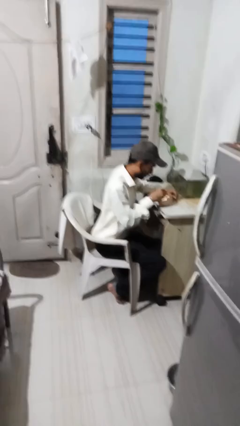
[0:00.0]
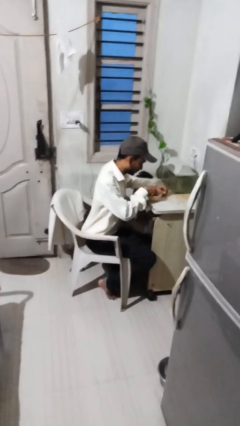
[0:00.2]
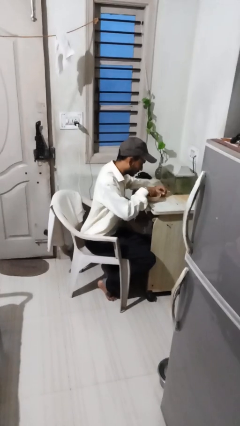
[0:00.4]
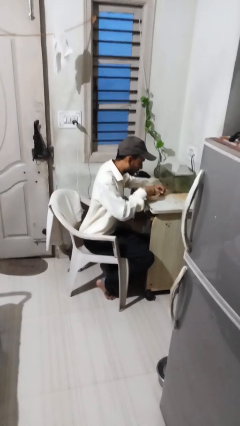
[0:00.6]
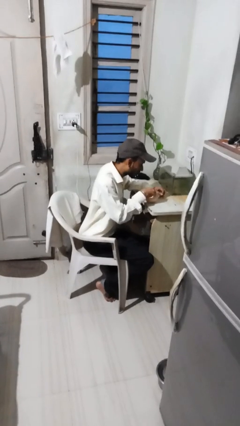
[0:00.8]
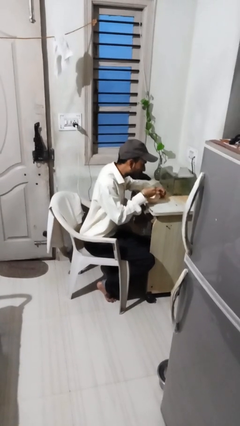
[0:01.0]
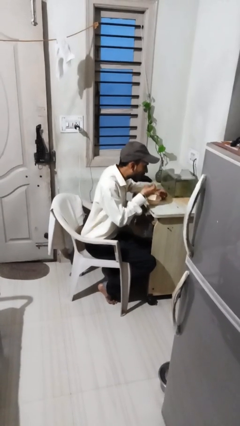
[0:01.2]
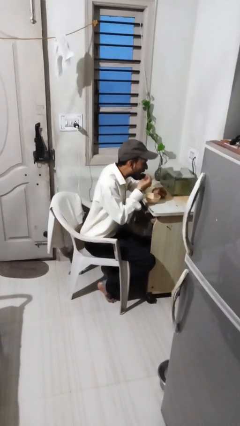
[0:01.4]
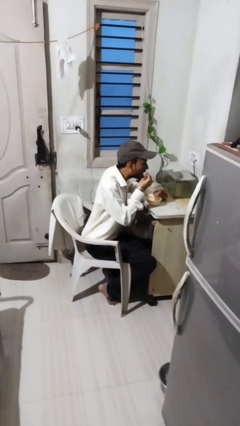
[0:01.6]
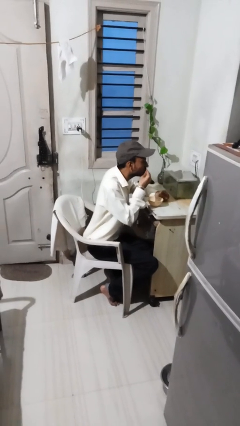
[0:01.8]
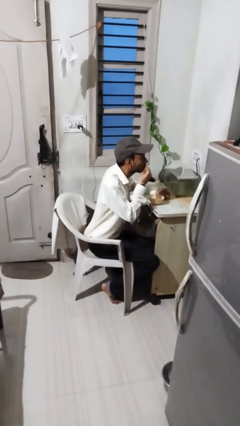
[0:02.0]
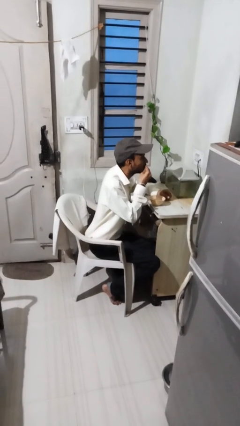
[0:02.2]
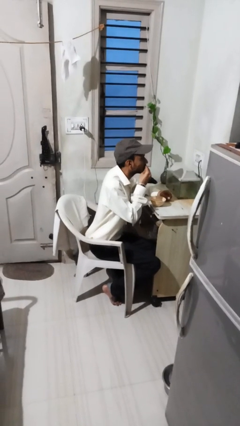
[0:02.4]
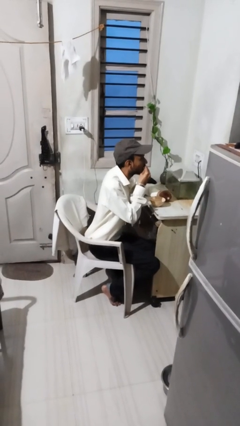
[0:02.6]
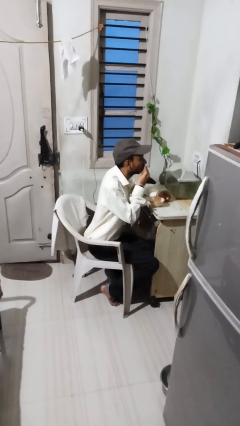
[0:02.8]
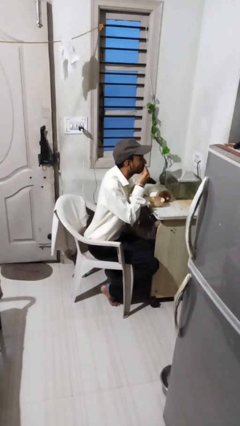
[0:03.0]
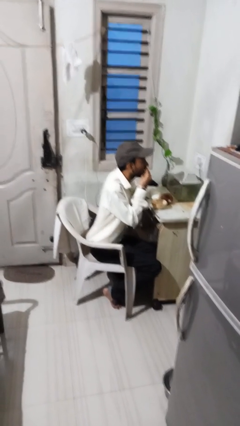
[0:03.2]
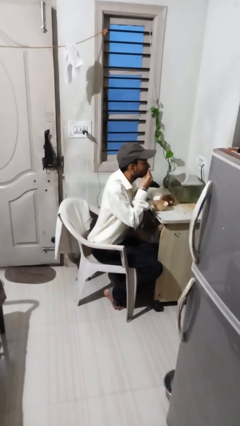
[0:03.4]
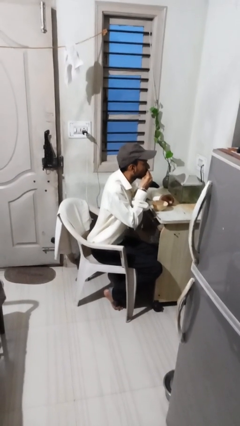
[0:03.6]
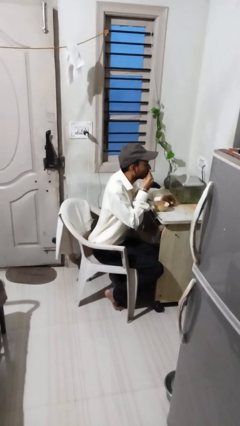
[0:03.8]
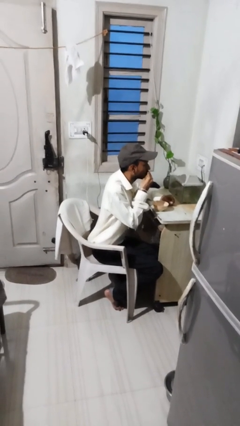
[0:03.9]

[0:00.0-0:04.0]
person eats with hands

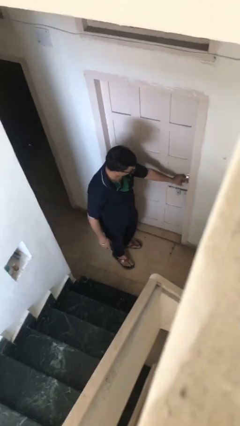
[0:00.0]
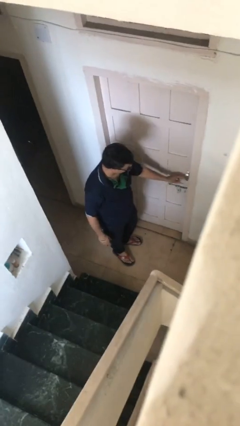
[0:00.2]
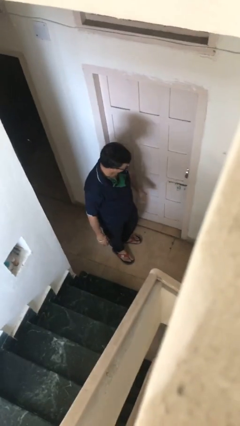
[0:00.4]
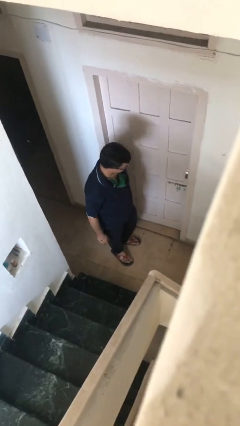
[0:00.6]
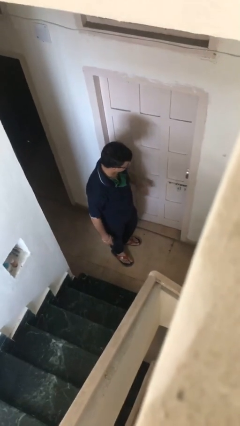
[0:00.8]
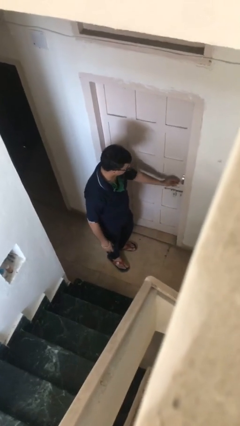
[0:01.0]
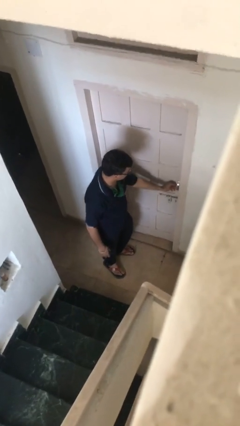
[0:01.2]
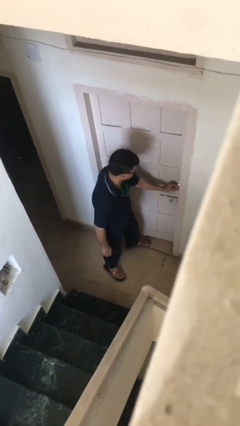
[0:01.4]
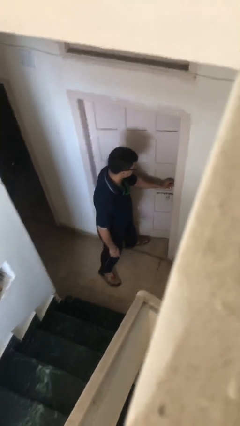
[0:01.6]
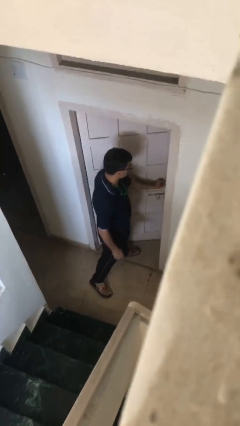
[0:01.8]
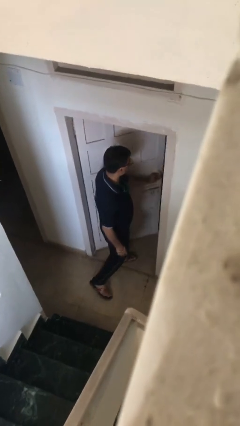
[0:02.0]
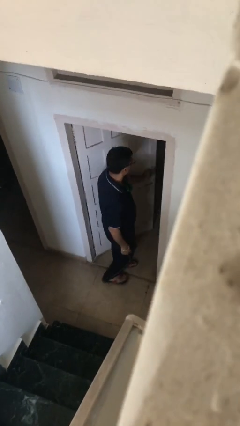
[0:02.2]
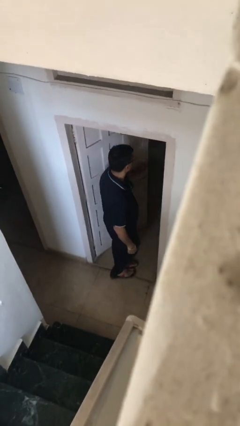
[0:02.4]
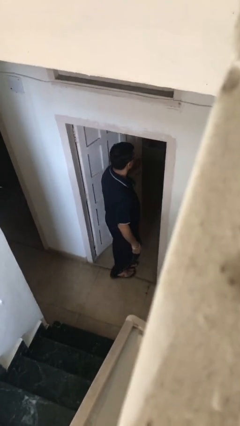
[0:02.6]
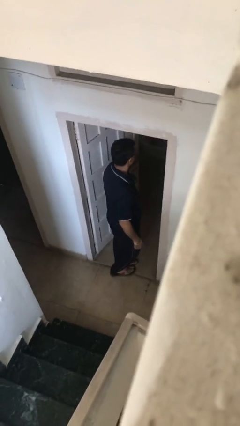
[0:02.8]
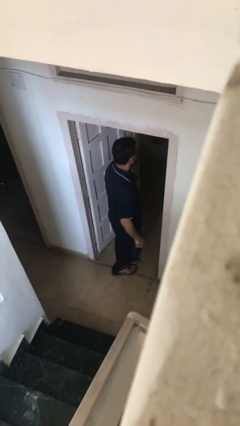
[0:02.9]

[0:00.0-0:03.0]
person opens facility door

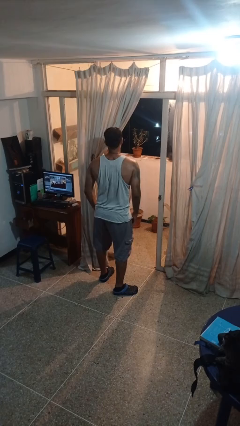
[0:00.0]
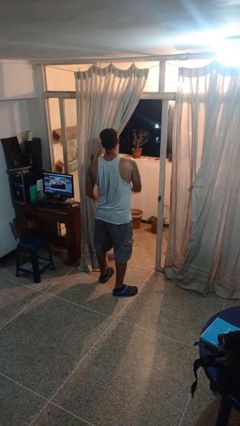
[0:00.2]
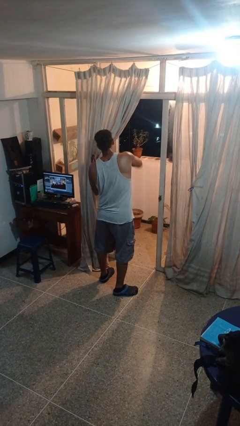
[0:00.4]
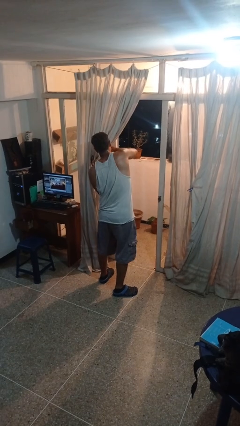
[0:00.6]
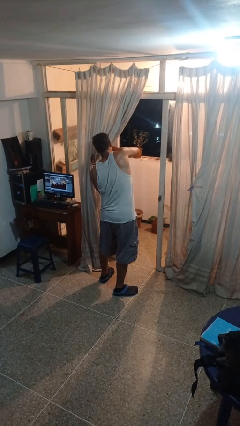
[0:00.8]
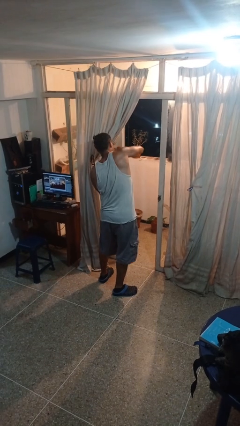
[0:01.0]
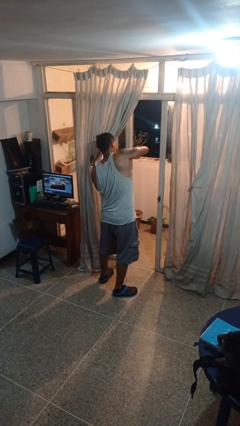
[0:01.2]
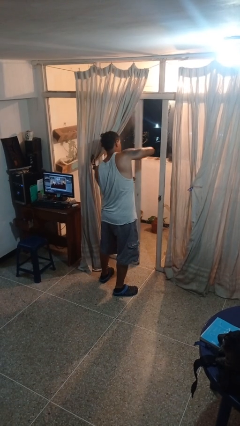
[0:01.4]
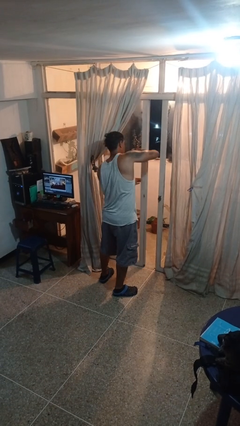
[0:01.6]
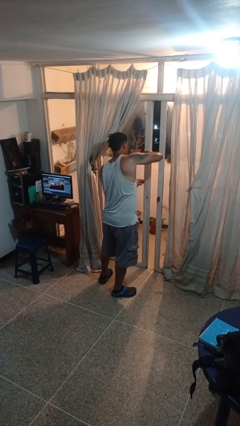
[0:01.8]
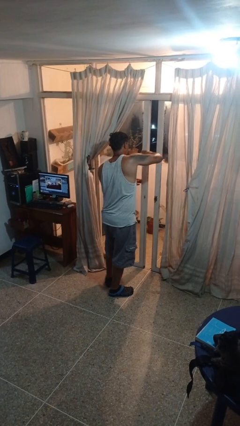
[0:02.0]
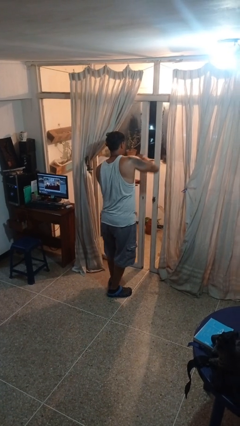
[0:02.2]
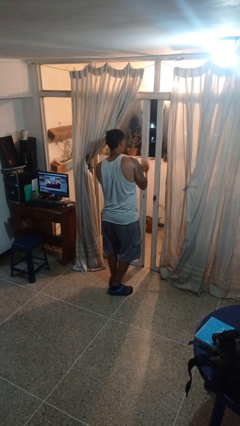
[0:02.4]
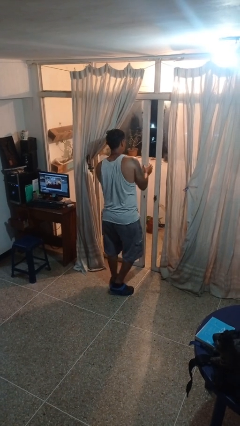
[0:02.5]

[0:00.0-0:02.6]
person closes sliding door

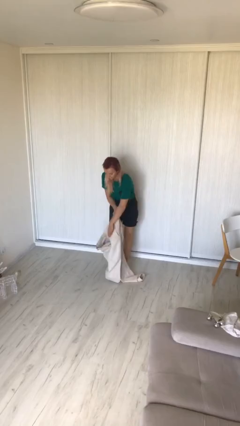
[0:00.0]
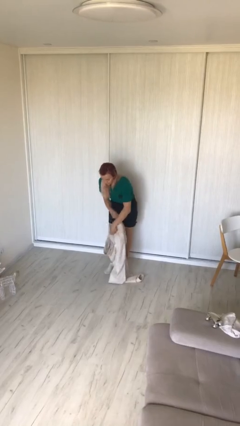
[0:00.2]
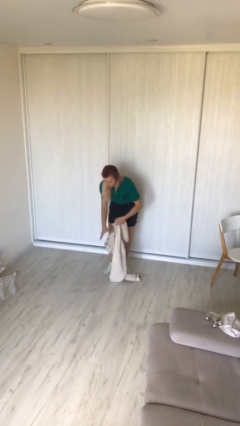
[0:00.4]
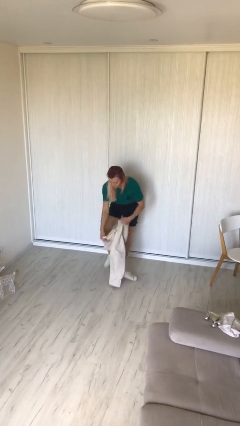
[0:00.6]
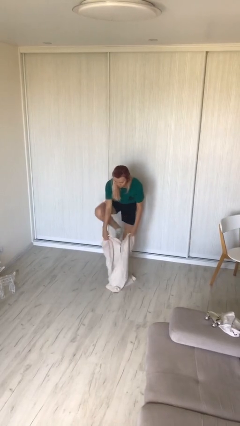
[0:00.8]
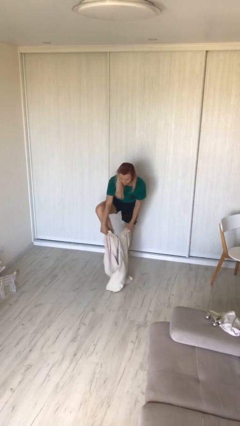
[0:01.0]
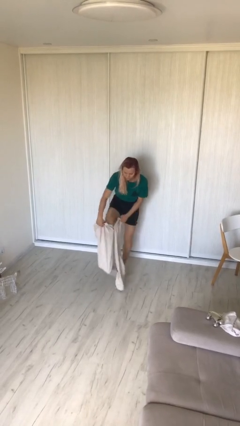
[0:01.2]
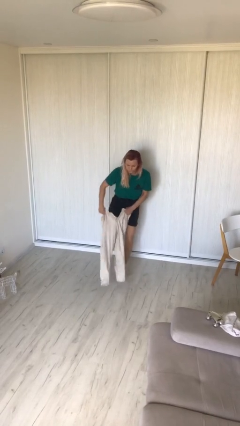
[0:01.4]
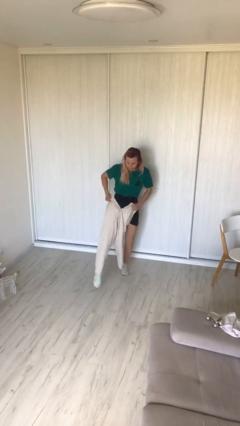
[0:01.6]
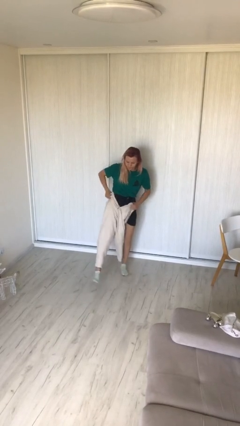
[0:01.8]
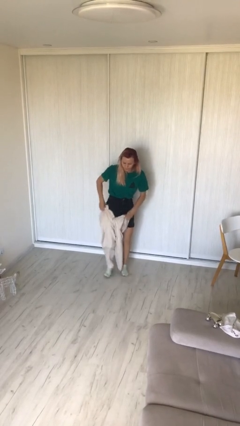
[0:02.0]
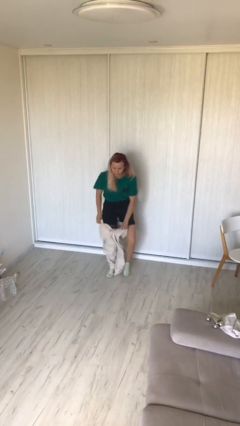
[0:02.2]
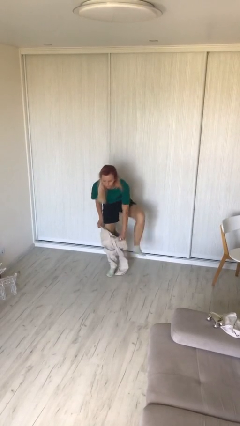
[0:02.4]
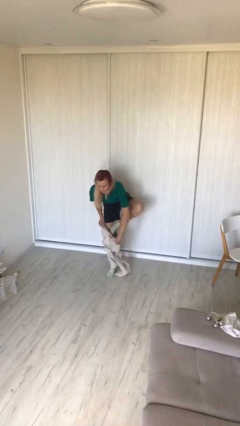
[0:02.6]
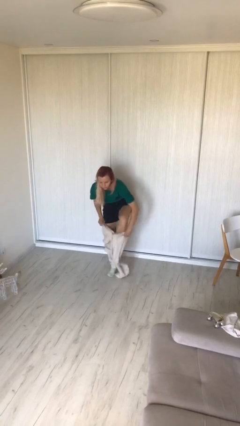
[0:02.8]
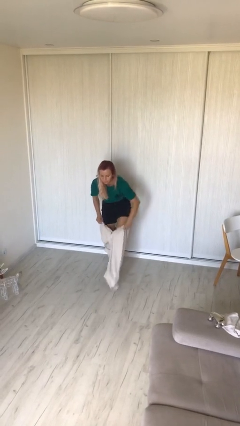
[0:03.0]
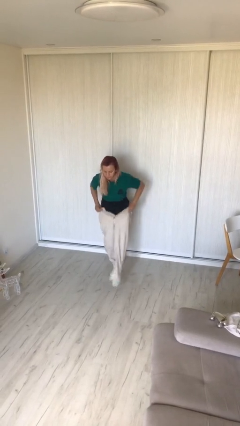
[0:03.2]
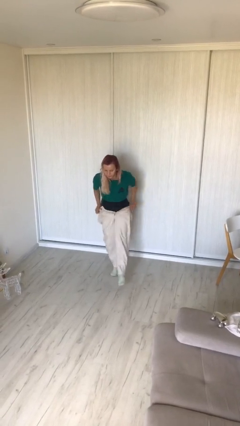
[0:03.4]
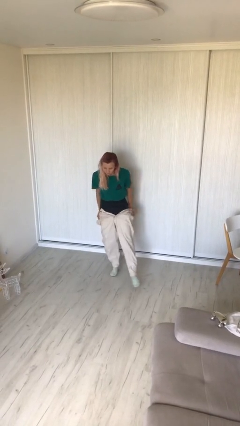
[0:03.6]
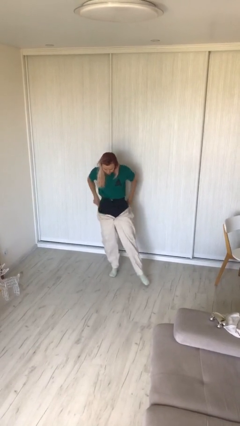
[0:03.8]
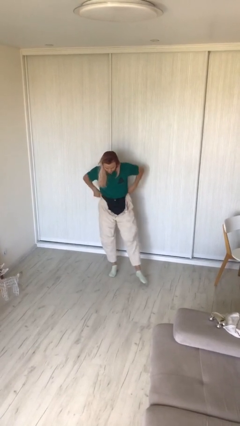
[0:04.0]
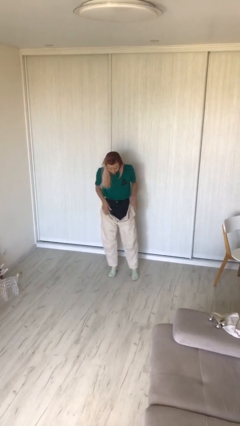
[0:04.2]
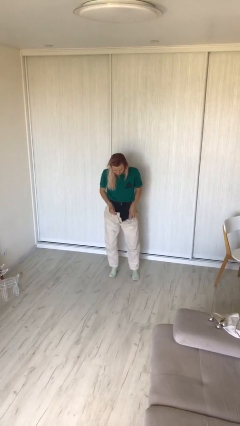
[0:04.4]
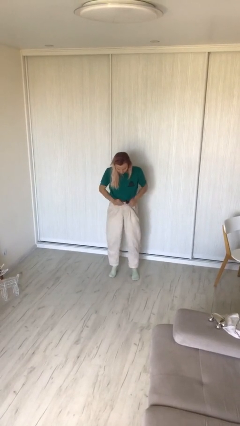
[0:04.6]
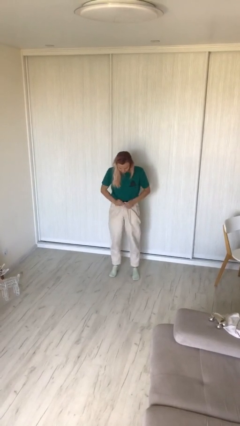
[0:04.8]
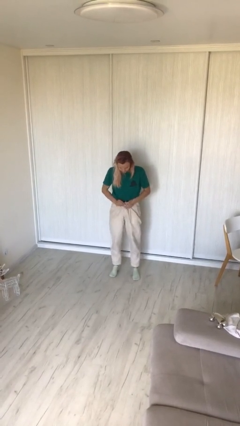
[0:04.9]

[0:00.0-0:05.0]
person puts on pants

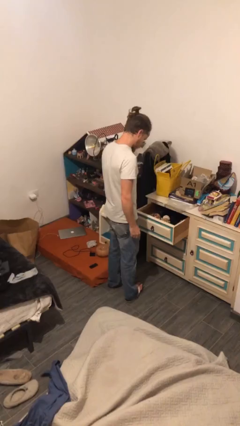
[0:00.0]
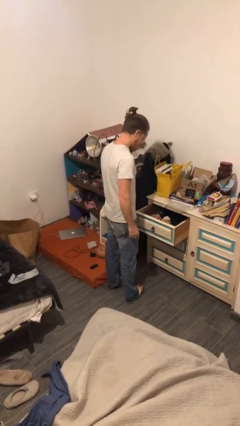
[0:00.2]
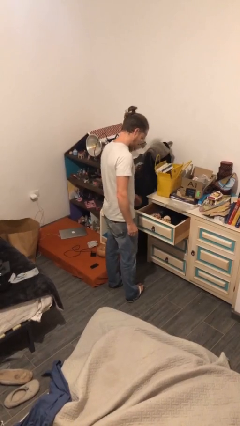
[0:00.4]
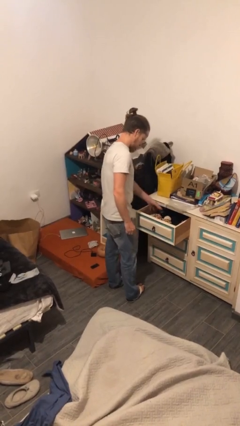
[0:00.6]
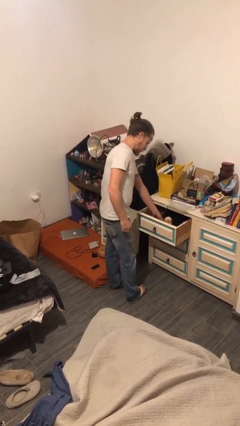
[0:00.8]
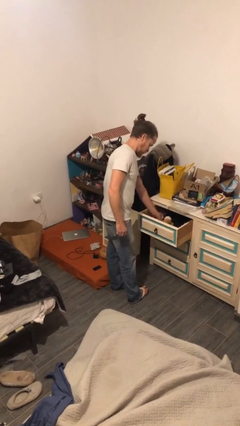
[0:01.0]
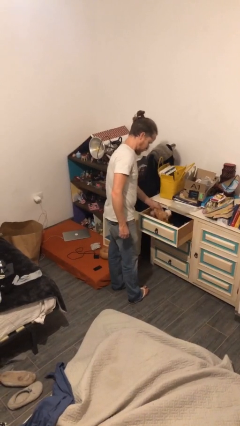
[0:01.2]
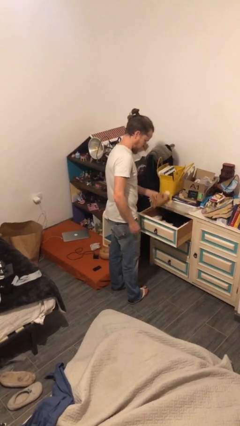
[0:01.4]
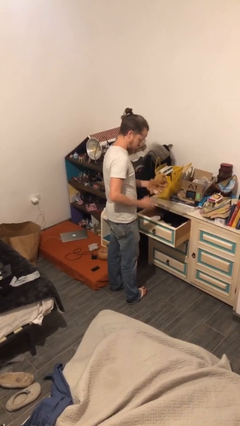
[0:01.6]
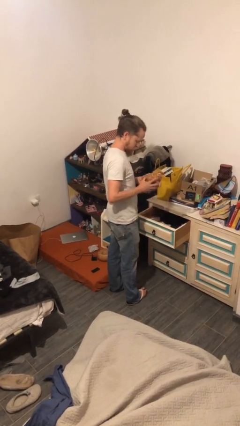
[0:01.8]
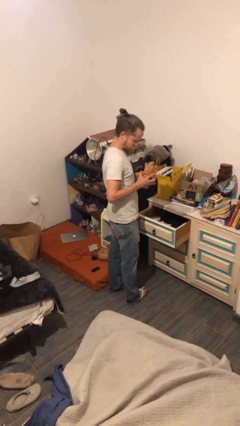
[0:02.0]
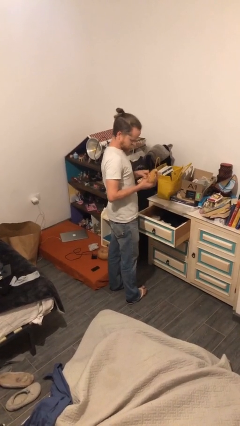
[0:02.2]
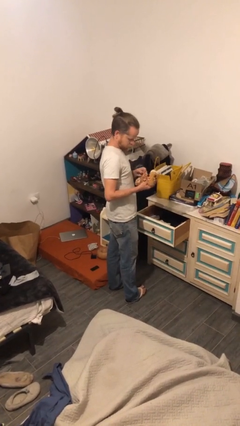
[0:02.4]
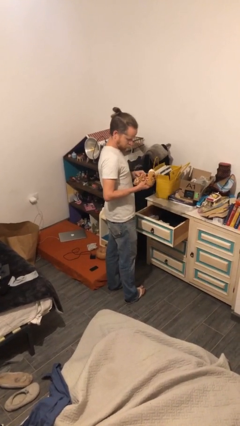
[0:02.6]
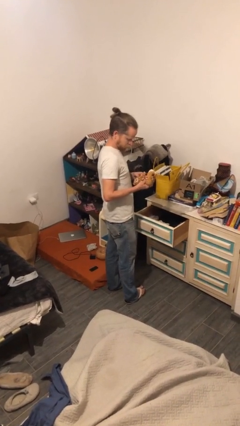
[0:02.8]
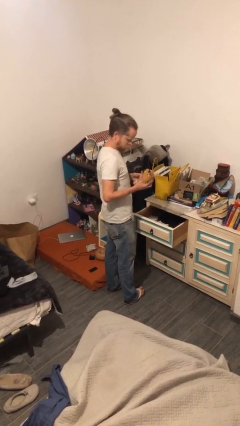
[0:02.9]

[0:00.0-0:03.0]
person picks up object from cabinet

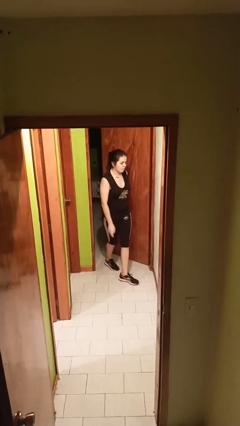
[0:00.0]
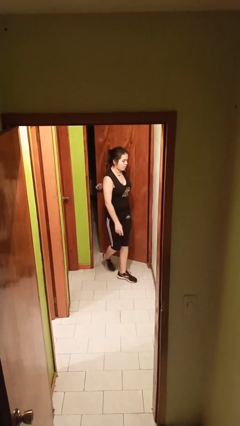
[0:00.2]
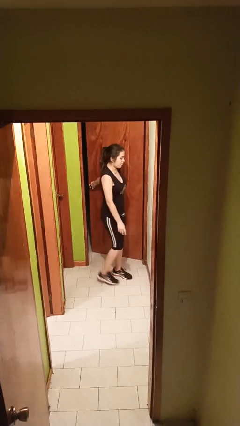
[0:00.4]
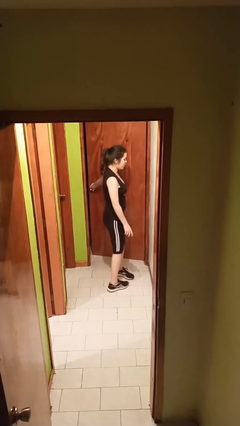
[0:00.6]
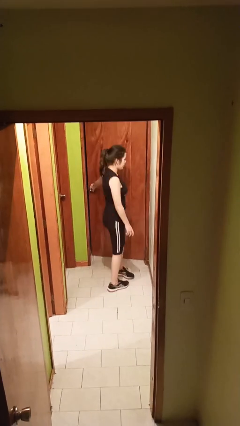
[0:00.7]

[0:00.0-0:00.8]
person closes facility door
